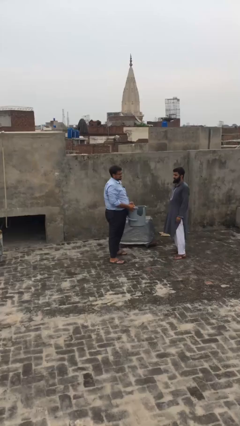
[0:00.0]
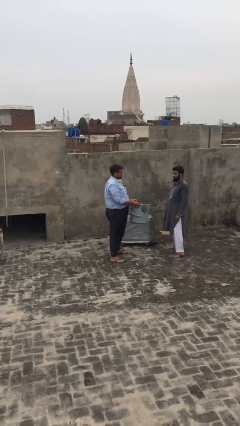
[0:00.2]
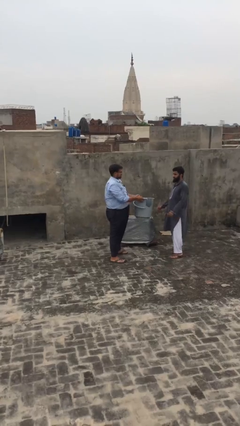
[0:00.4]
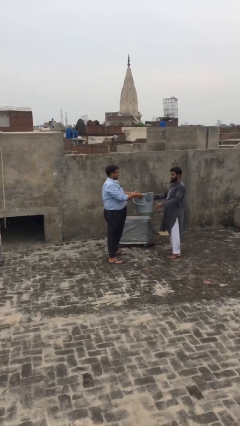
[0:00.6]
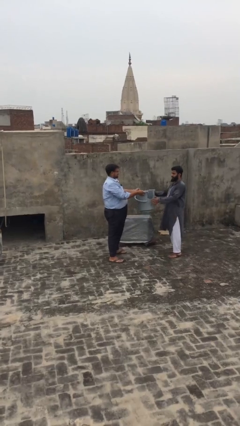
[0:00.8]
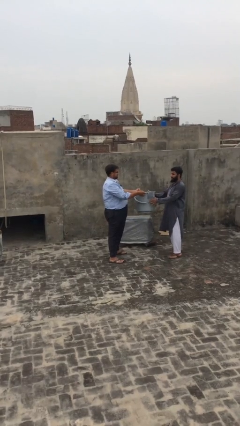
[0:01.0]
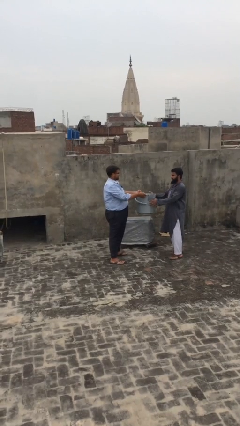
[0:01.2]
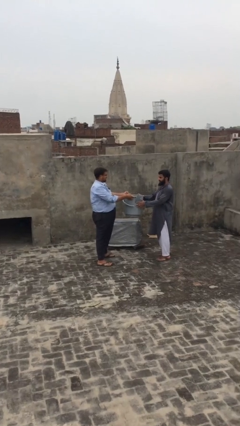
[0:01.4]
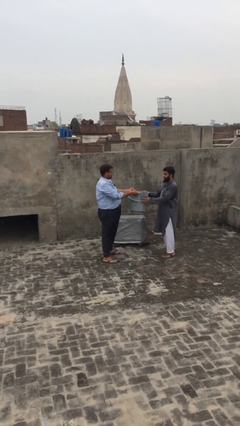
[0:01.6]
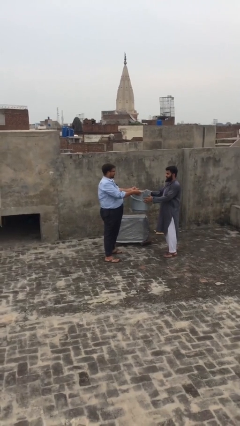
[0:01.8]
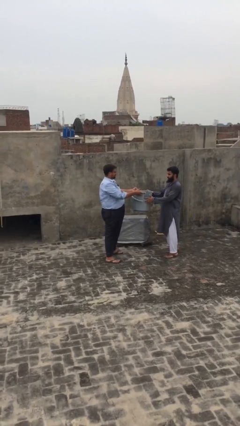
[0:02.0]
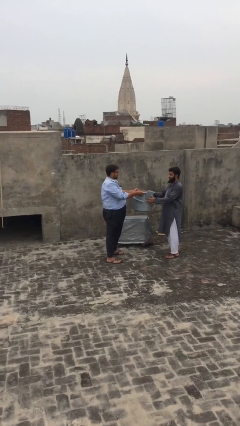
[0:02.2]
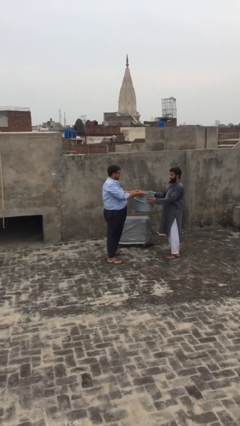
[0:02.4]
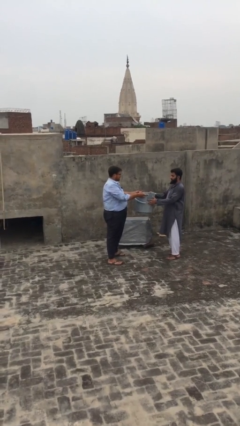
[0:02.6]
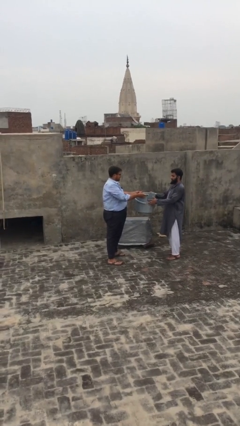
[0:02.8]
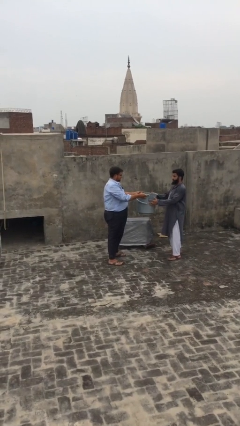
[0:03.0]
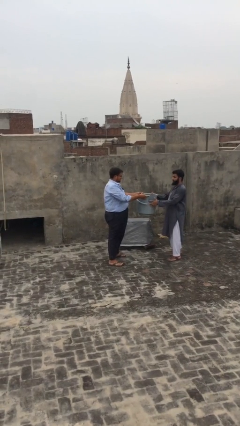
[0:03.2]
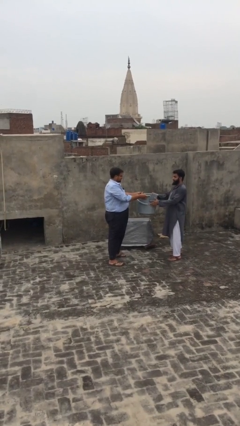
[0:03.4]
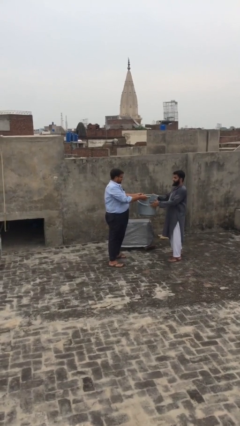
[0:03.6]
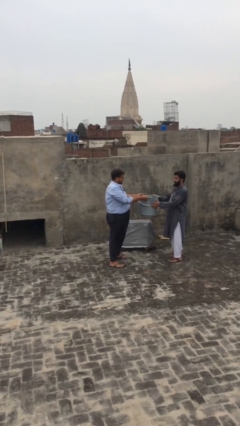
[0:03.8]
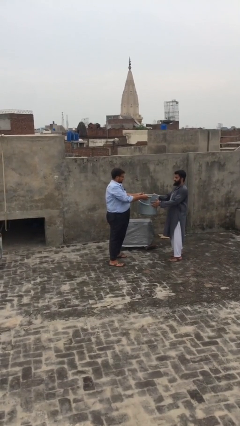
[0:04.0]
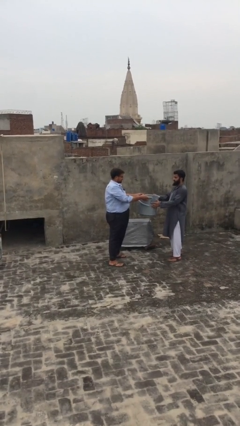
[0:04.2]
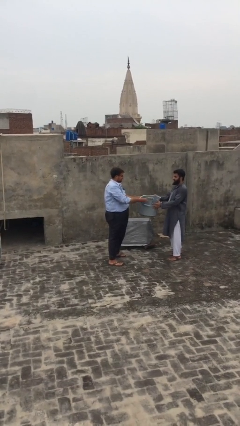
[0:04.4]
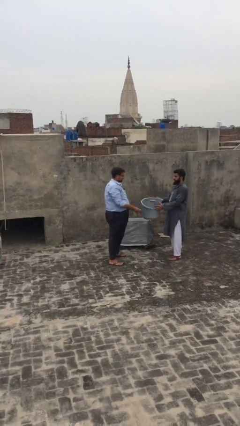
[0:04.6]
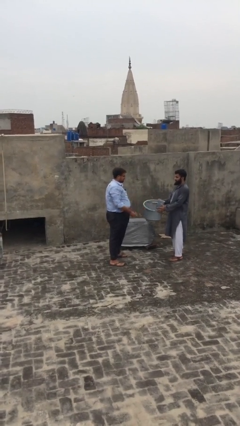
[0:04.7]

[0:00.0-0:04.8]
person transfers object to person

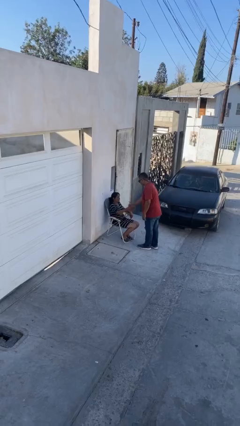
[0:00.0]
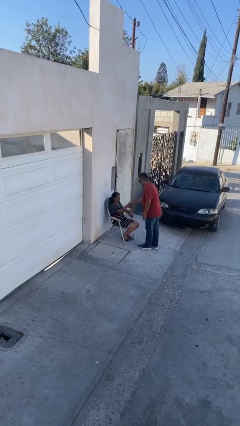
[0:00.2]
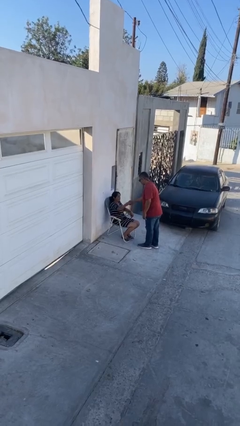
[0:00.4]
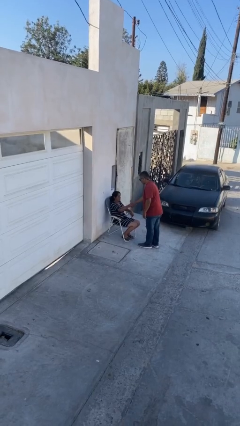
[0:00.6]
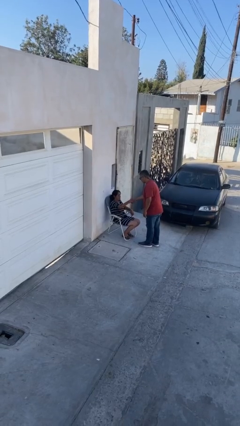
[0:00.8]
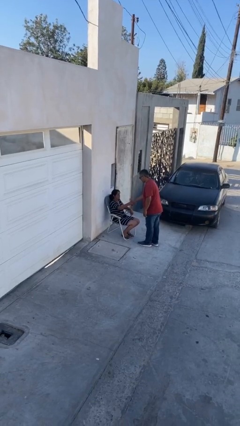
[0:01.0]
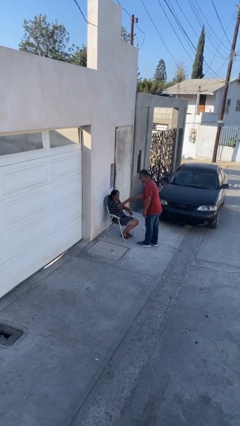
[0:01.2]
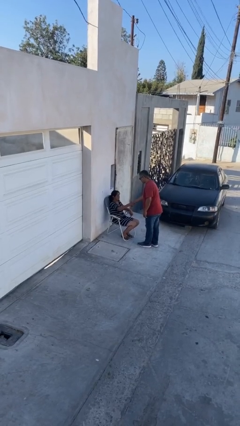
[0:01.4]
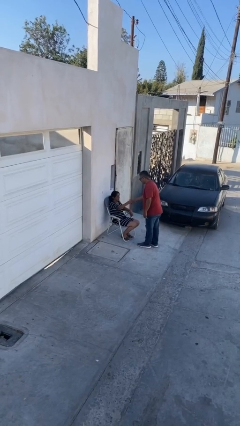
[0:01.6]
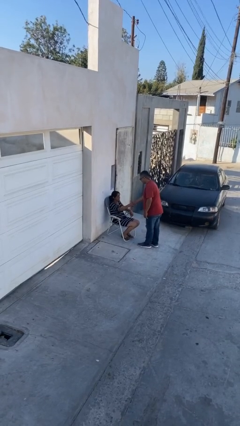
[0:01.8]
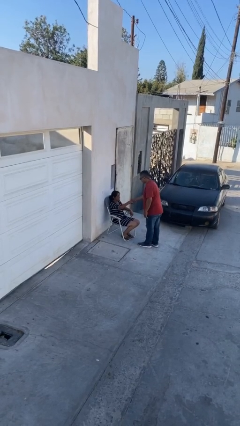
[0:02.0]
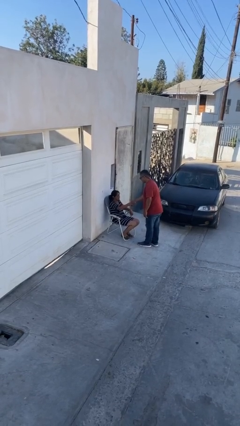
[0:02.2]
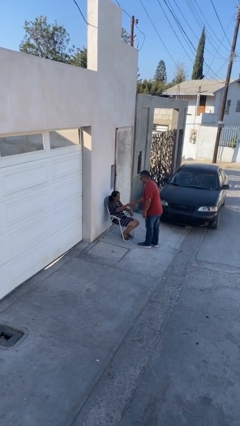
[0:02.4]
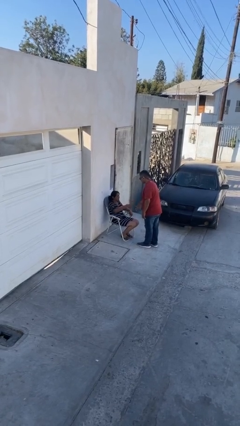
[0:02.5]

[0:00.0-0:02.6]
person shakes hand

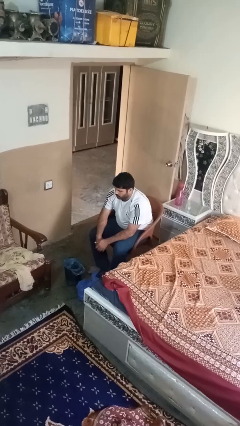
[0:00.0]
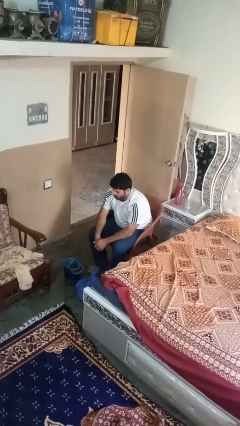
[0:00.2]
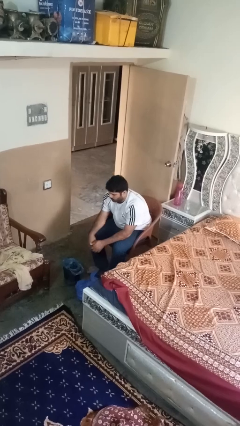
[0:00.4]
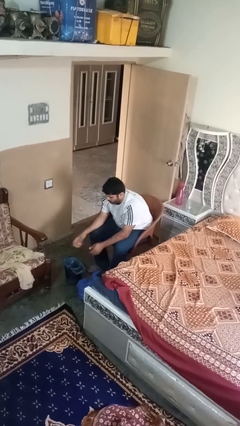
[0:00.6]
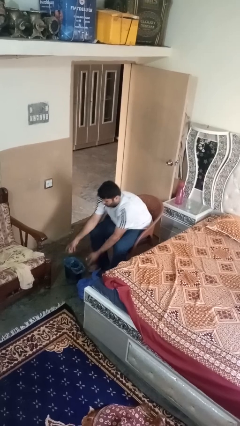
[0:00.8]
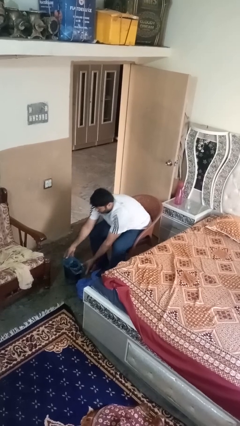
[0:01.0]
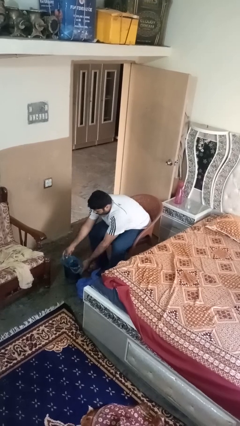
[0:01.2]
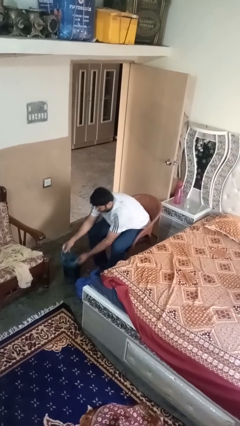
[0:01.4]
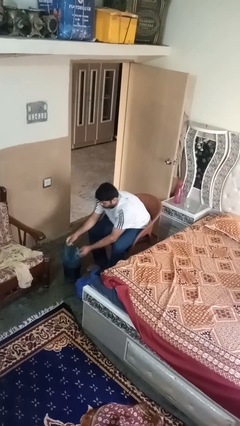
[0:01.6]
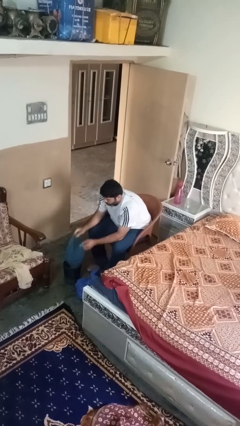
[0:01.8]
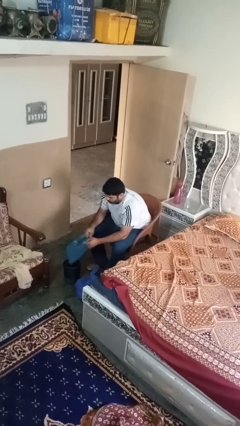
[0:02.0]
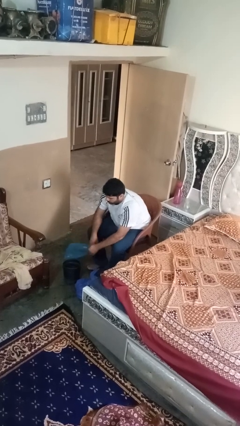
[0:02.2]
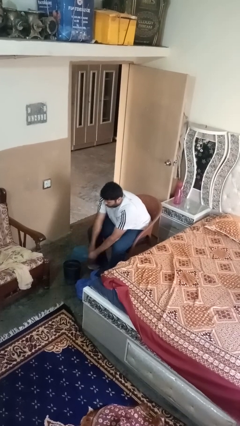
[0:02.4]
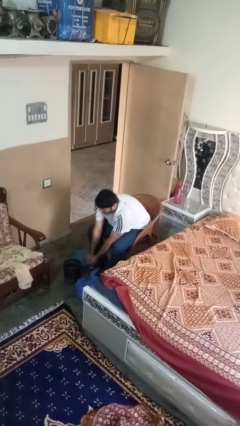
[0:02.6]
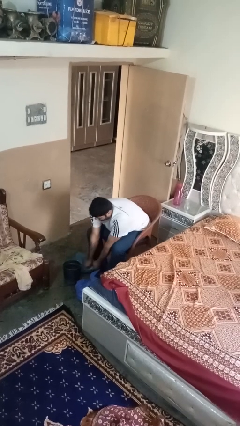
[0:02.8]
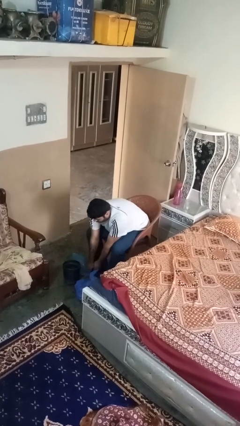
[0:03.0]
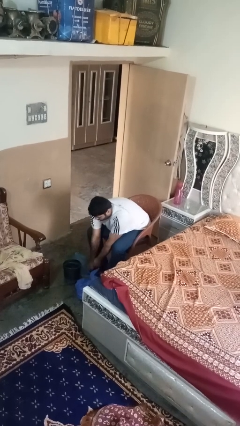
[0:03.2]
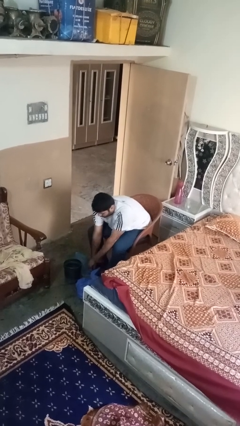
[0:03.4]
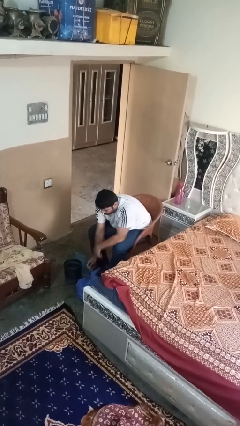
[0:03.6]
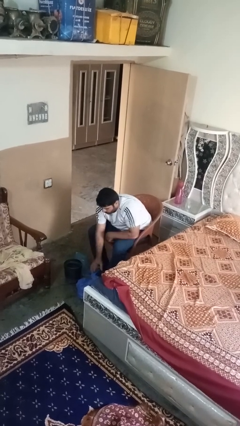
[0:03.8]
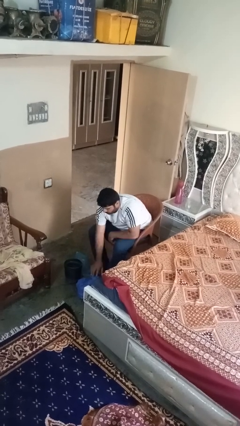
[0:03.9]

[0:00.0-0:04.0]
person removes trashbag from trashcan

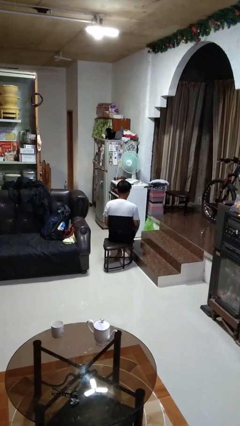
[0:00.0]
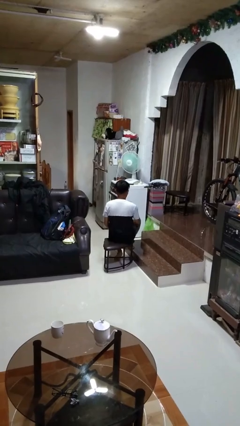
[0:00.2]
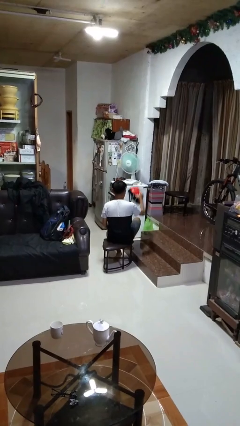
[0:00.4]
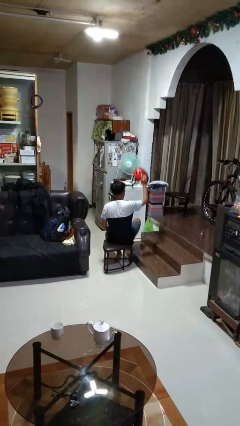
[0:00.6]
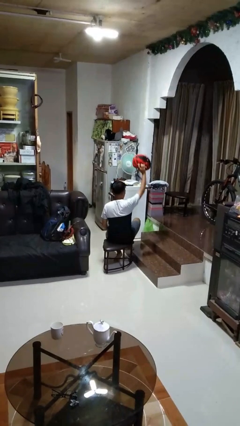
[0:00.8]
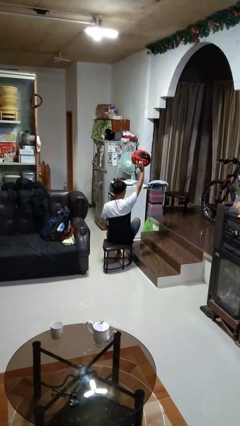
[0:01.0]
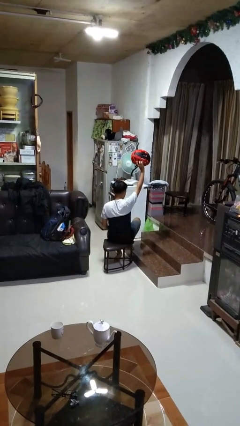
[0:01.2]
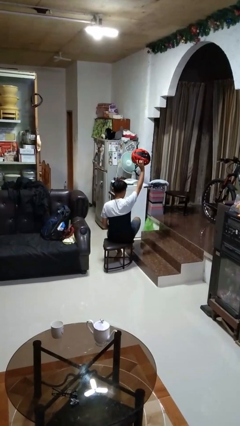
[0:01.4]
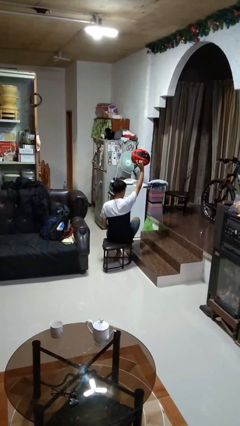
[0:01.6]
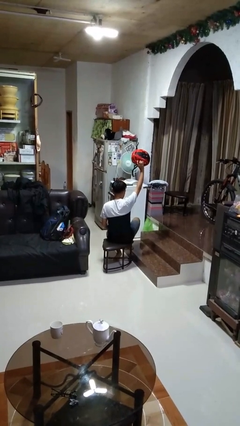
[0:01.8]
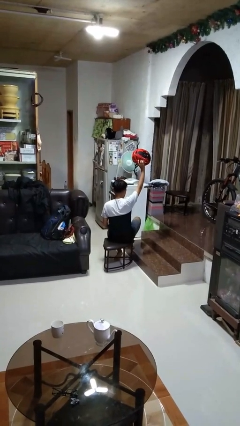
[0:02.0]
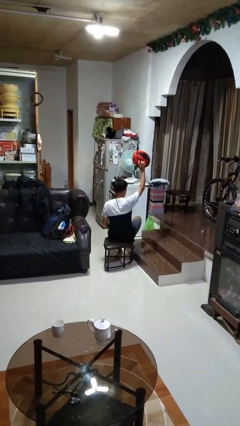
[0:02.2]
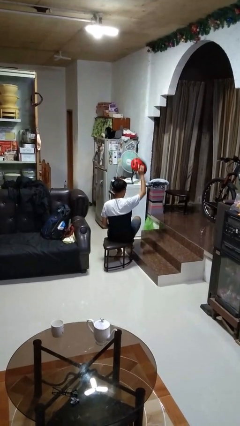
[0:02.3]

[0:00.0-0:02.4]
person holds object above head

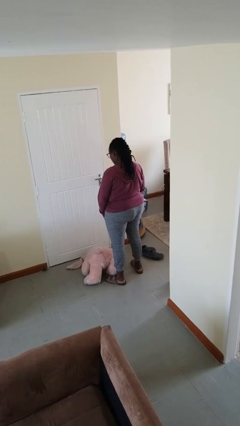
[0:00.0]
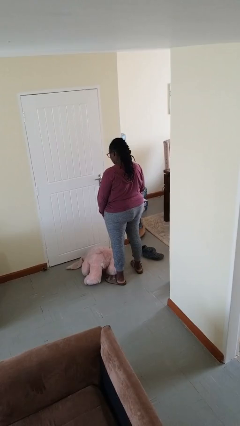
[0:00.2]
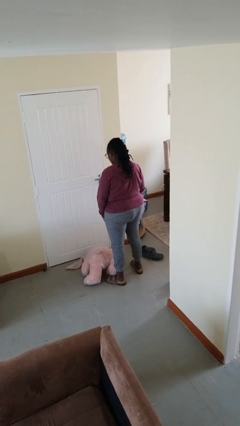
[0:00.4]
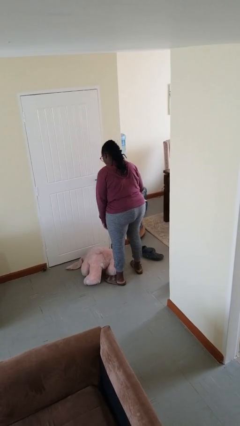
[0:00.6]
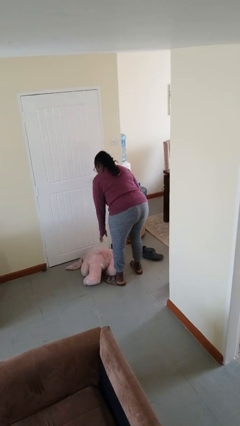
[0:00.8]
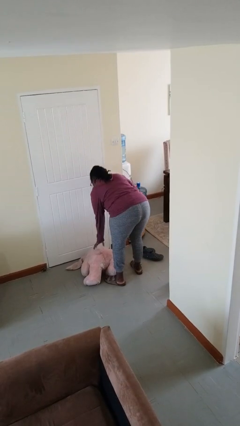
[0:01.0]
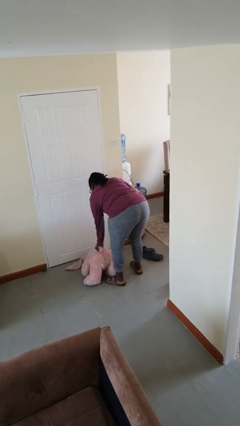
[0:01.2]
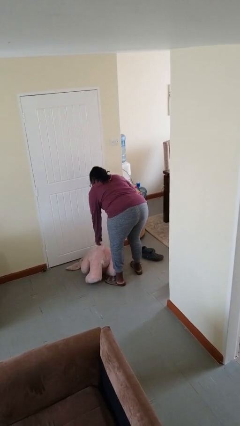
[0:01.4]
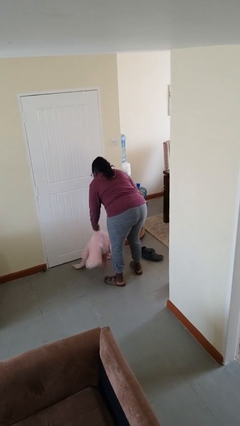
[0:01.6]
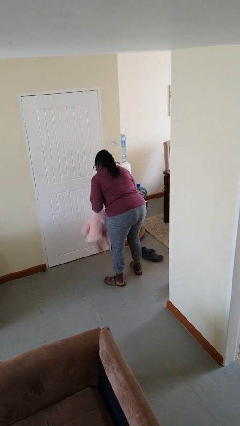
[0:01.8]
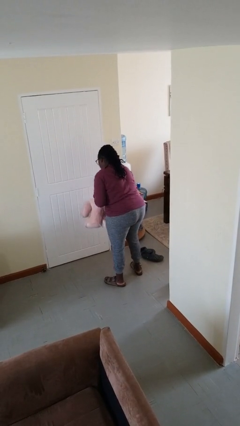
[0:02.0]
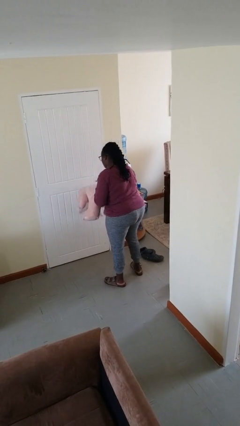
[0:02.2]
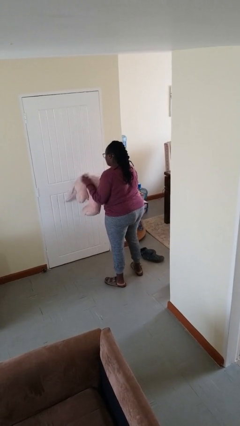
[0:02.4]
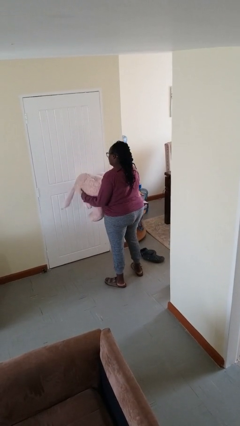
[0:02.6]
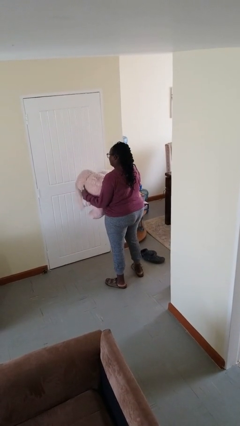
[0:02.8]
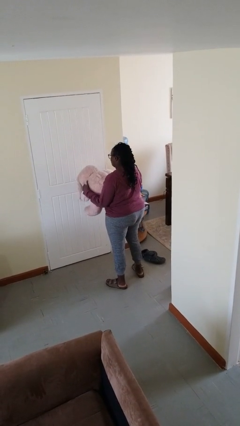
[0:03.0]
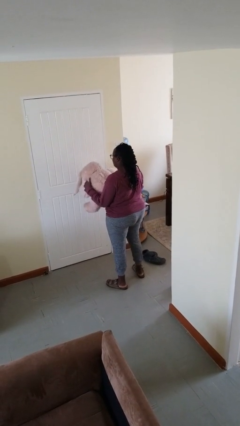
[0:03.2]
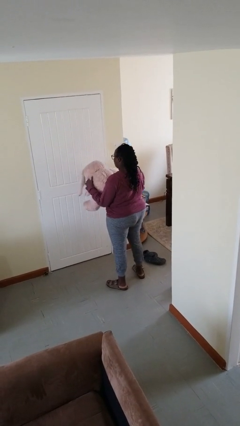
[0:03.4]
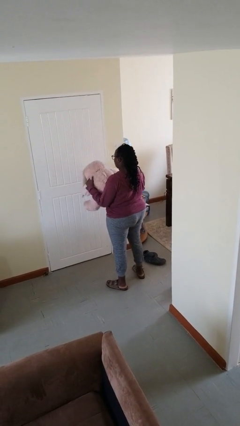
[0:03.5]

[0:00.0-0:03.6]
person picks up object from floor
